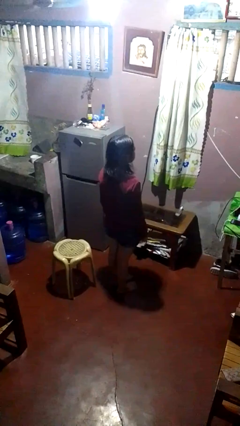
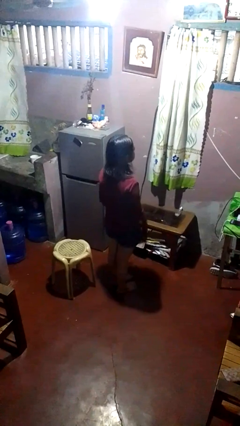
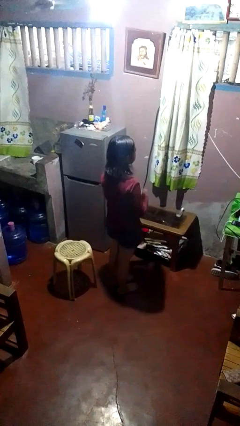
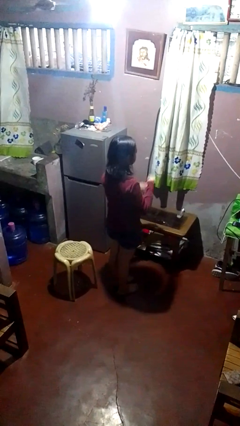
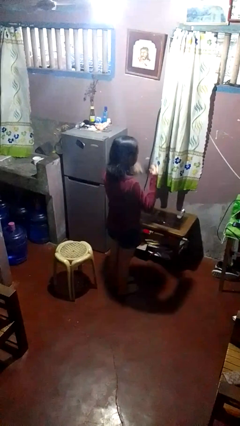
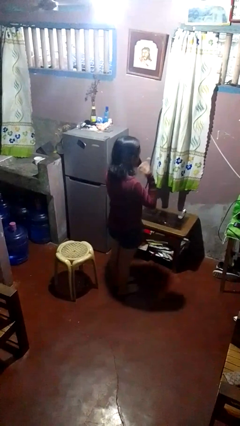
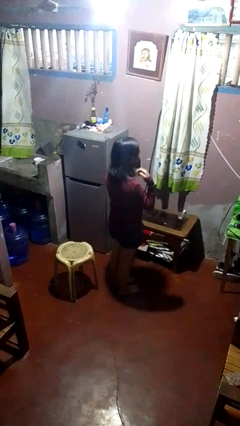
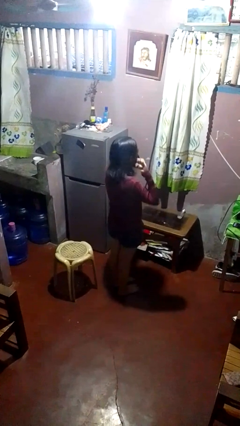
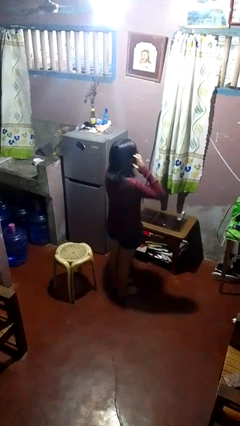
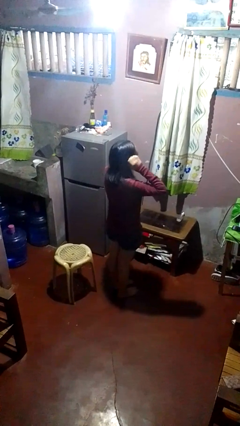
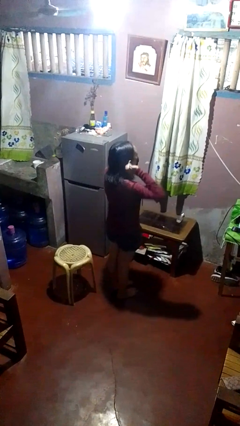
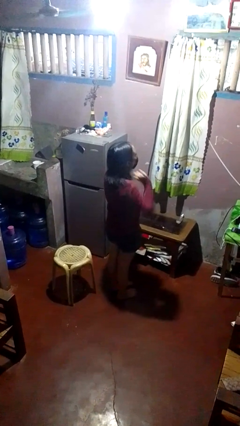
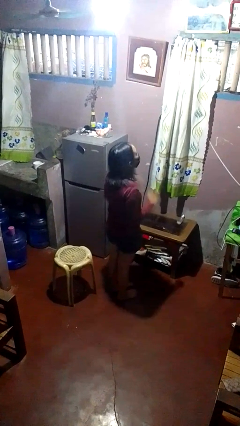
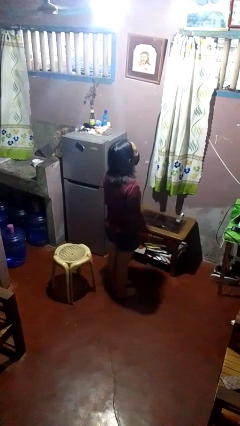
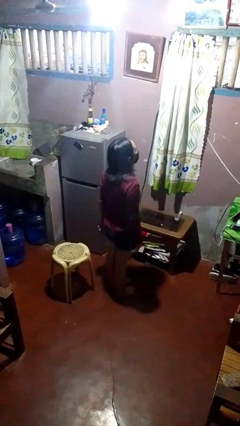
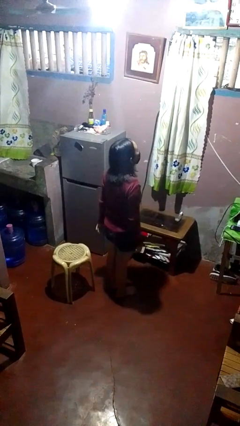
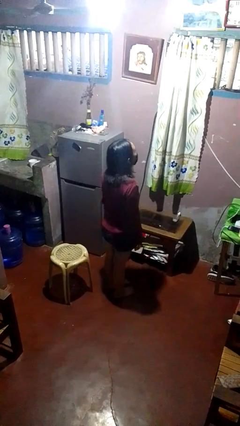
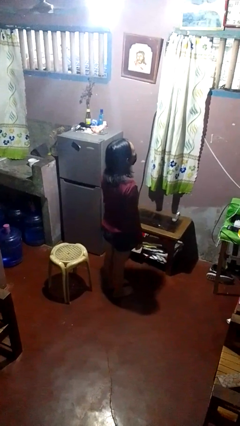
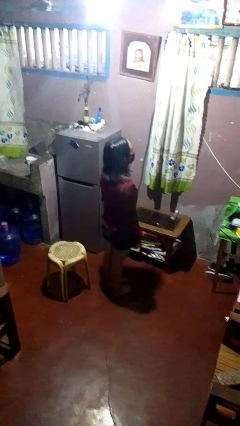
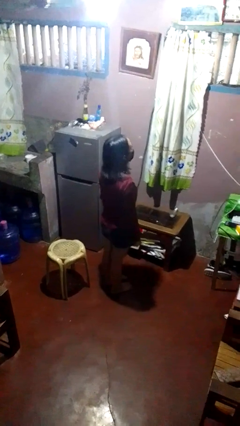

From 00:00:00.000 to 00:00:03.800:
person puts on facemask

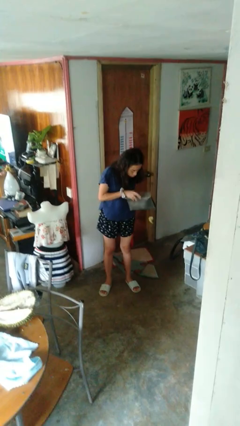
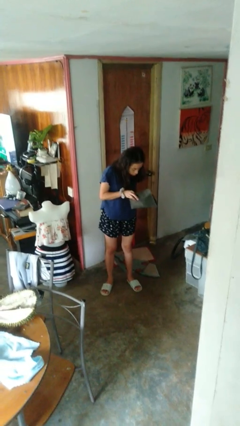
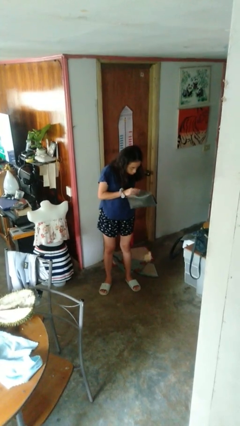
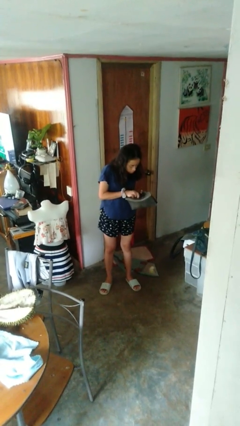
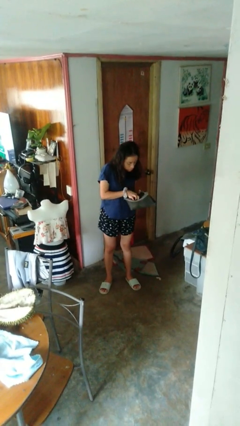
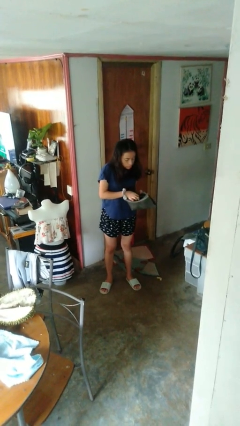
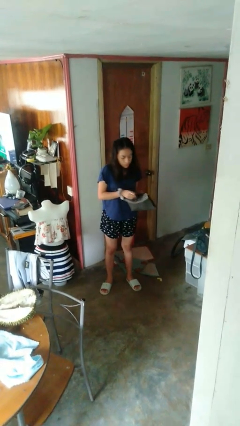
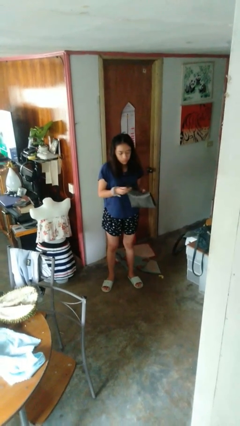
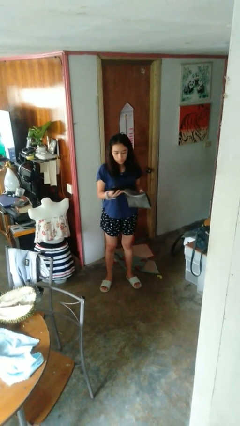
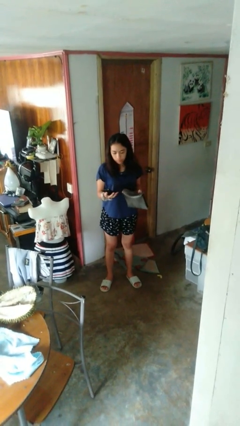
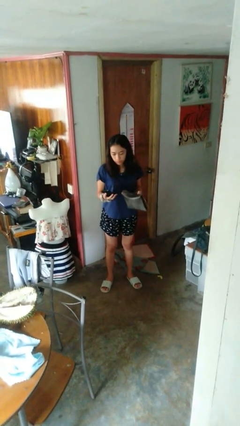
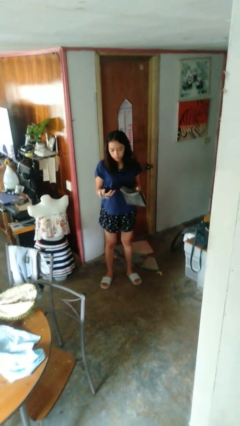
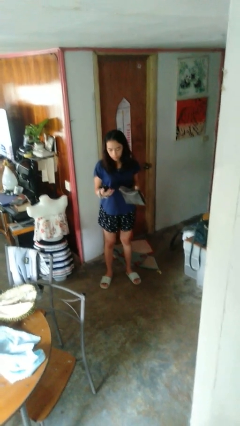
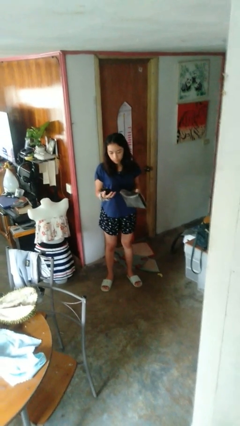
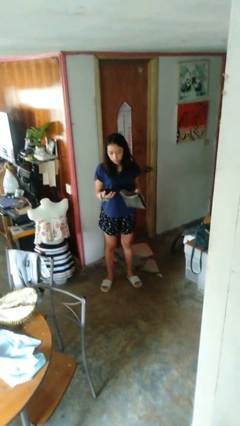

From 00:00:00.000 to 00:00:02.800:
person takes object from purse

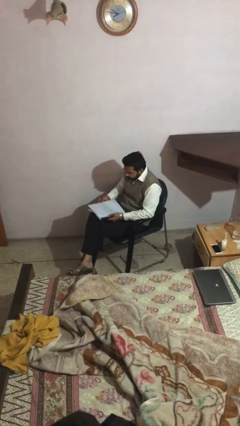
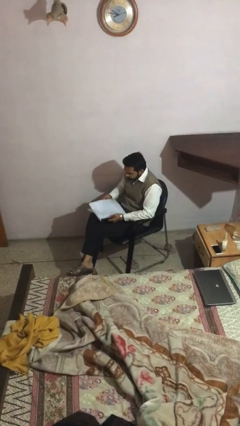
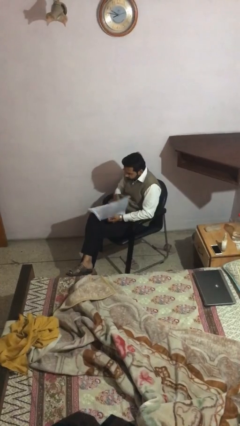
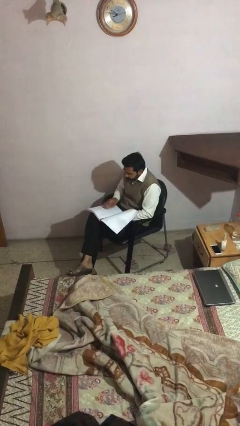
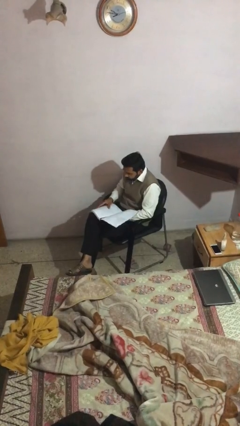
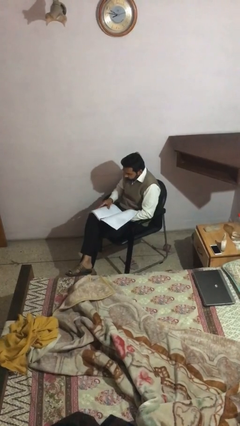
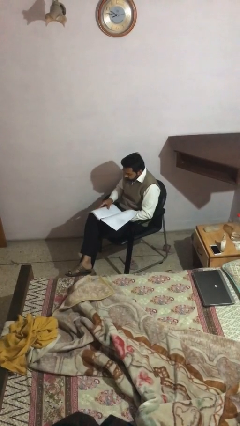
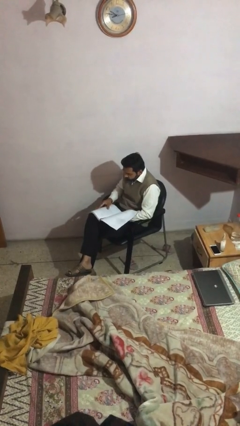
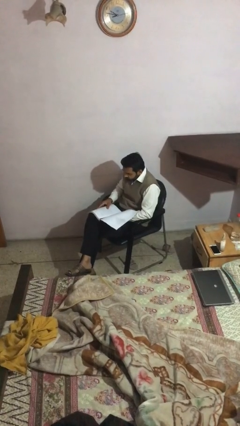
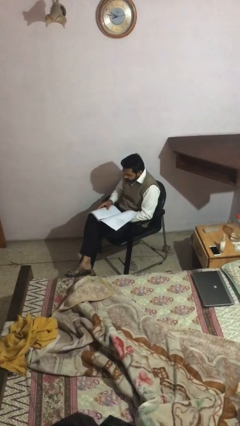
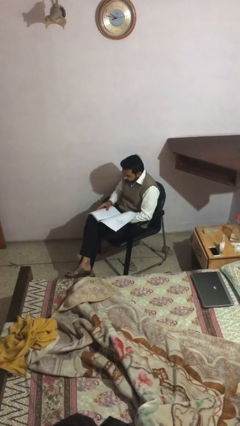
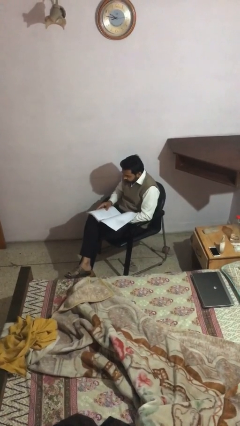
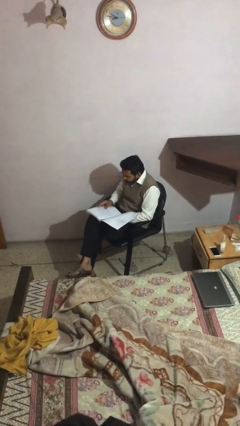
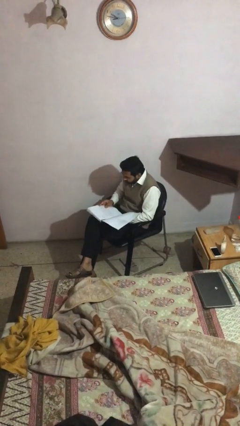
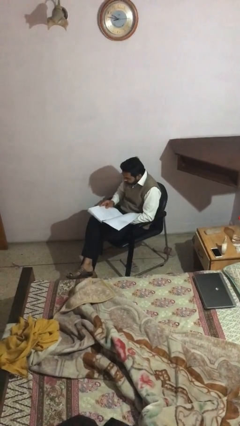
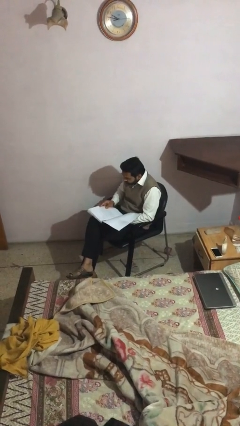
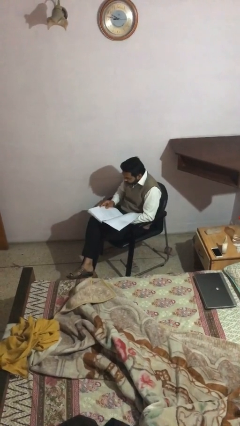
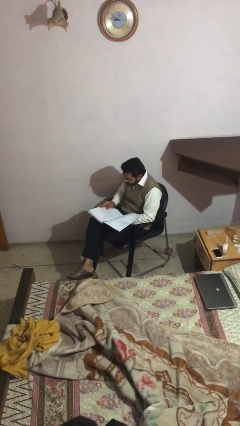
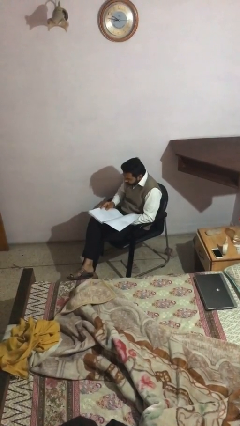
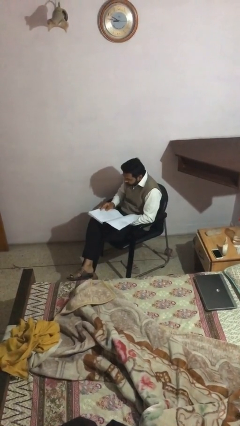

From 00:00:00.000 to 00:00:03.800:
person reads document

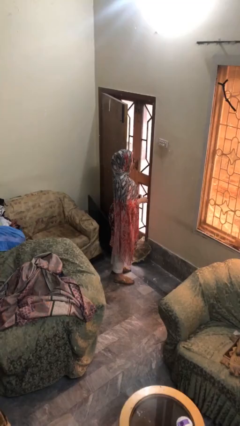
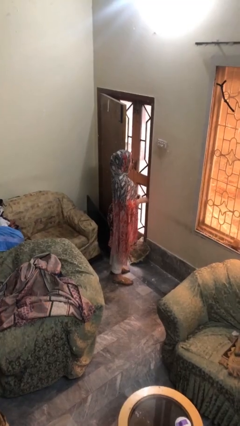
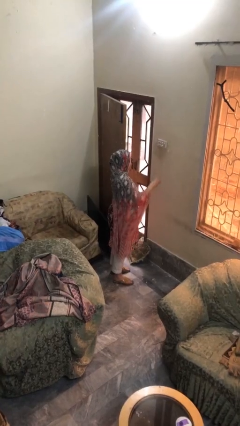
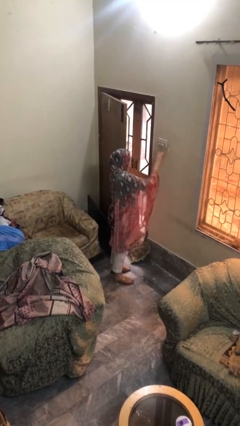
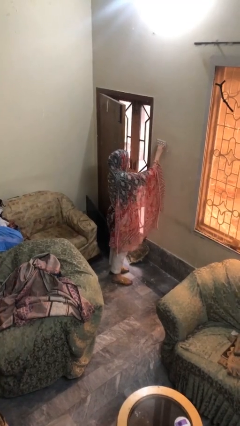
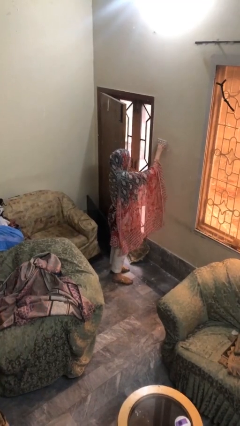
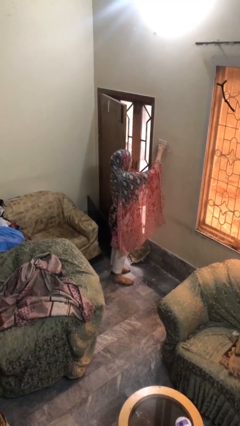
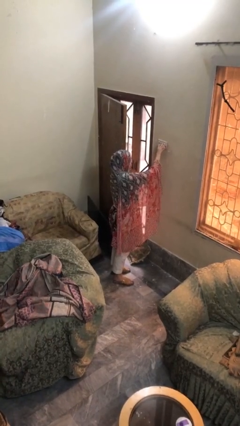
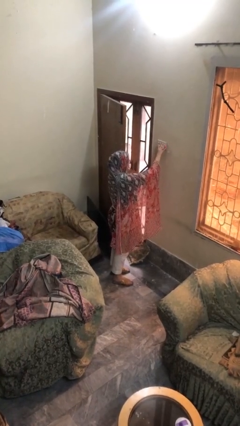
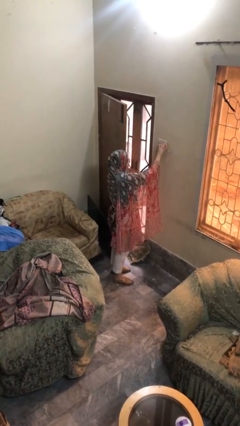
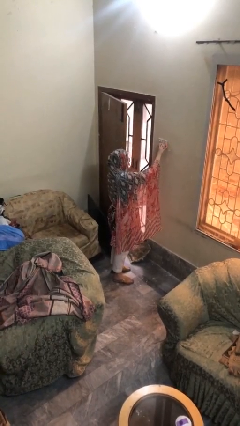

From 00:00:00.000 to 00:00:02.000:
person plugs into electrical socket

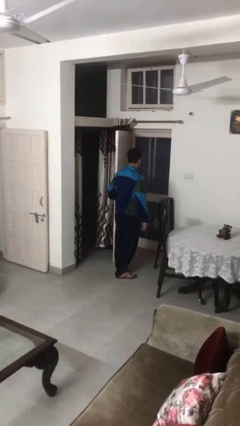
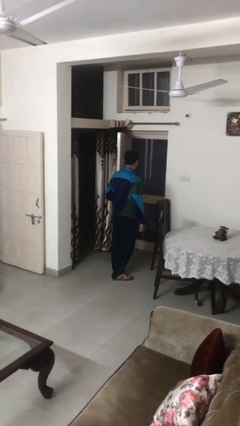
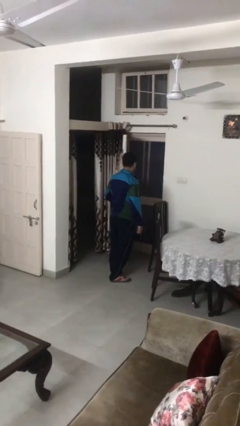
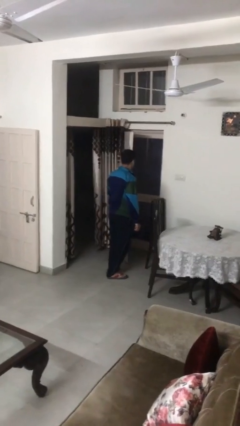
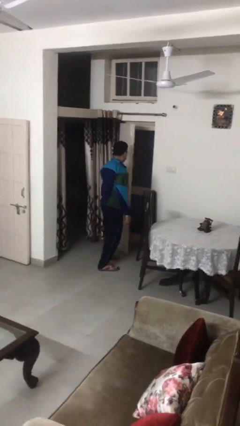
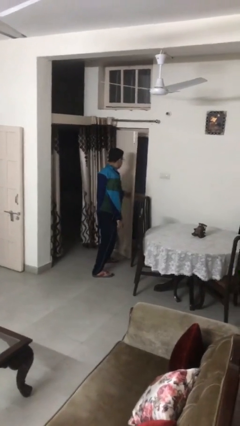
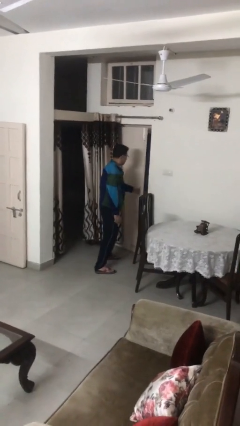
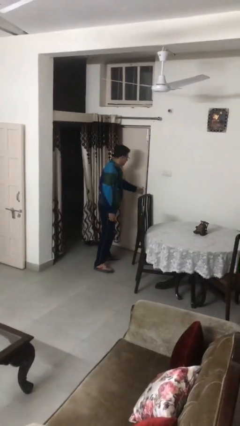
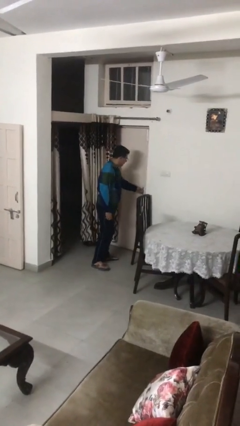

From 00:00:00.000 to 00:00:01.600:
person closes facility door

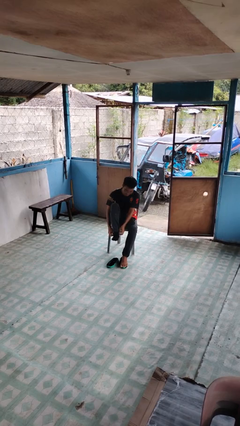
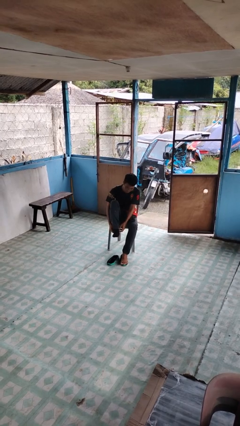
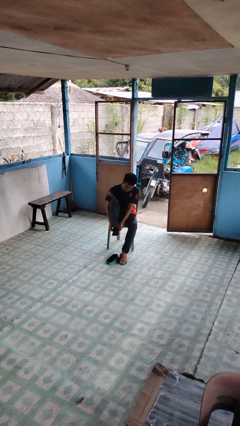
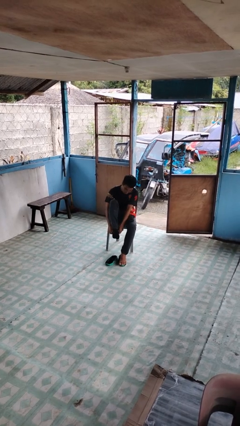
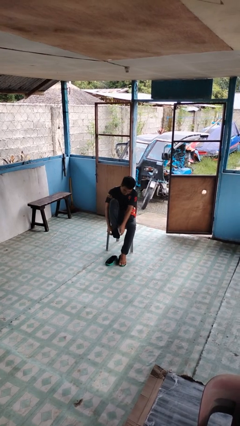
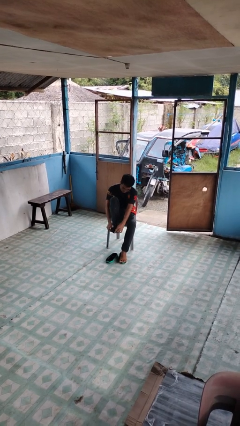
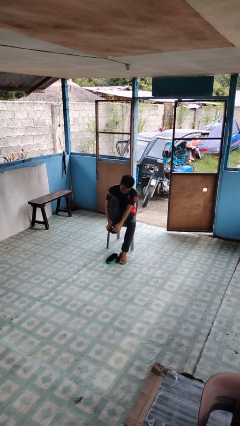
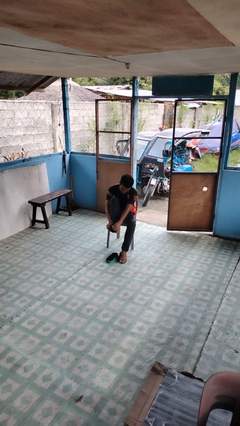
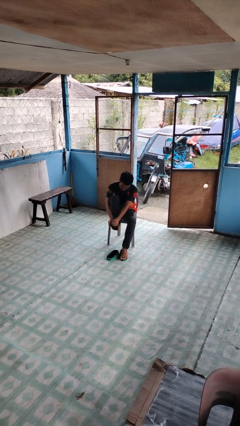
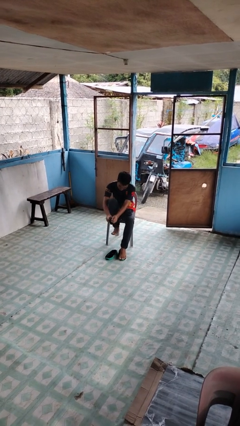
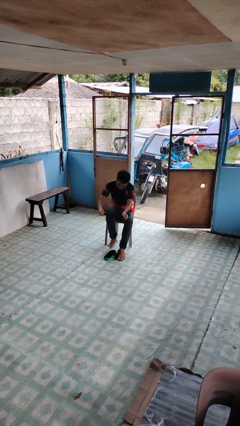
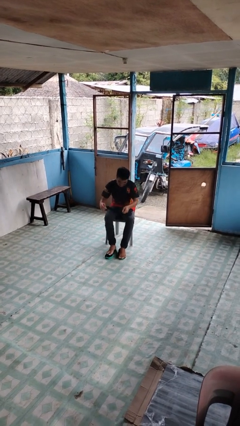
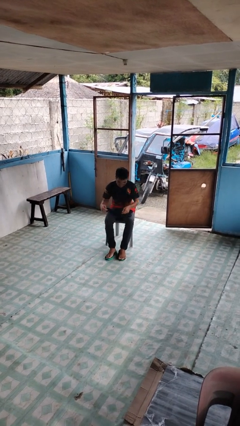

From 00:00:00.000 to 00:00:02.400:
person takes off socks

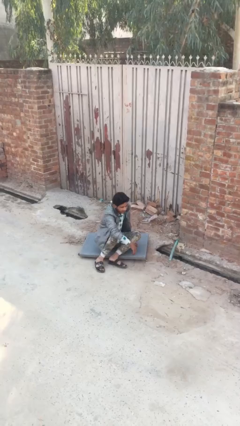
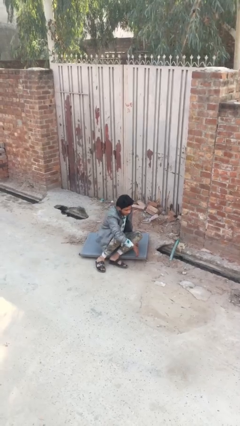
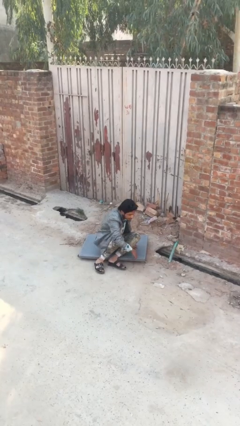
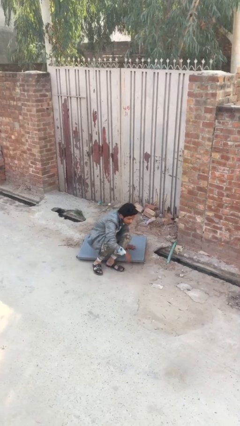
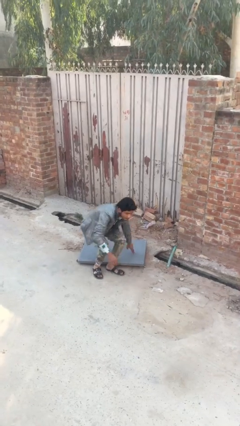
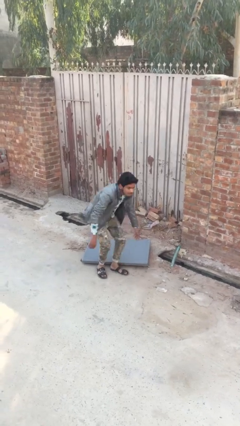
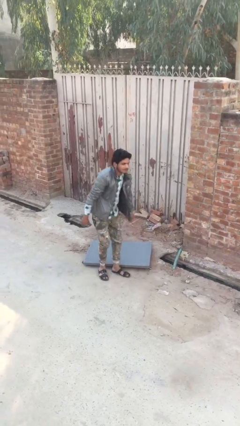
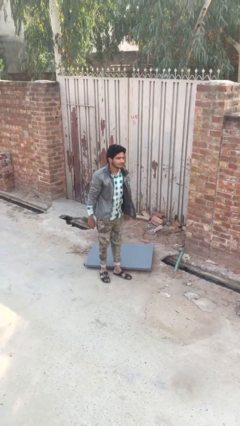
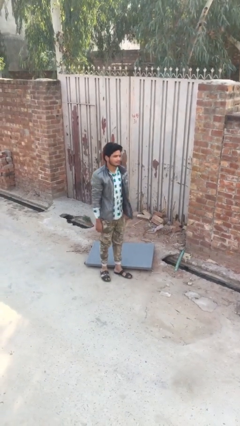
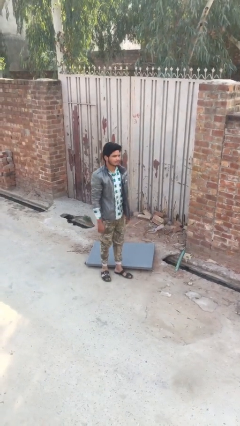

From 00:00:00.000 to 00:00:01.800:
person stands up
